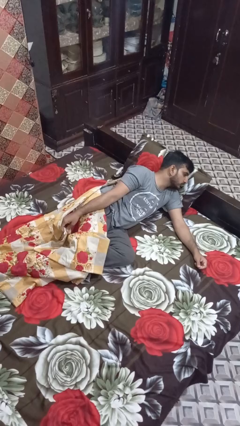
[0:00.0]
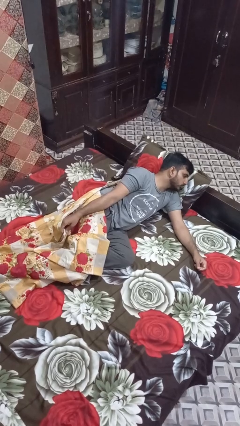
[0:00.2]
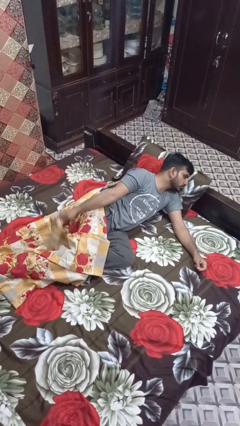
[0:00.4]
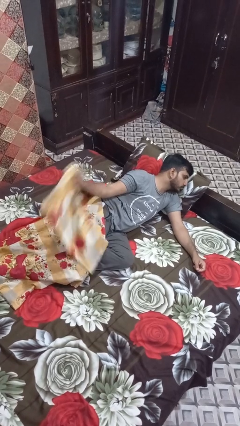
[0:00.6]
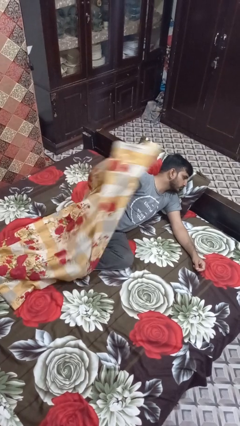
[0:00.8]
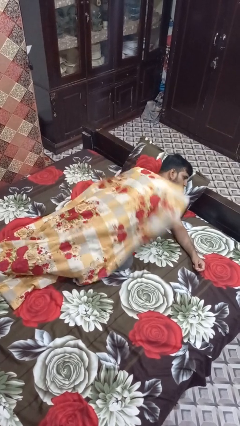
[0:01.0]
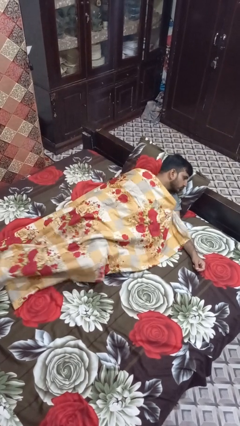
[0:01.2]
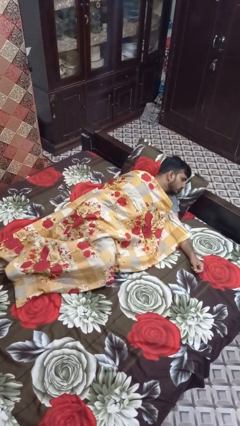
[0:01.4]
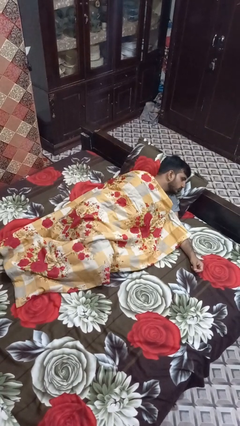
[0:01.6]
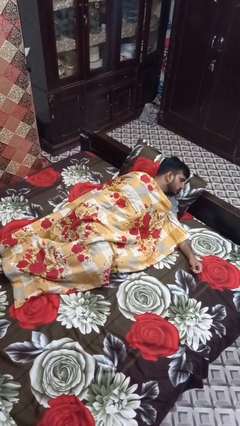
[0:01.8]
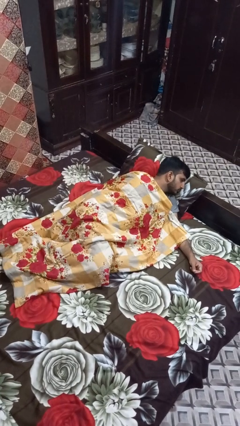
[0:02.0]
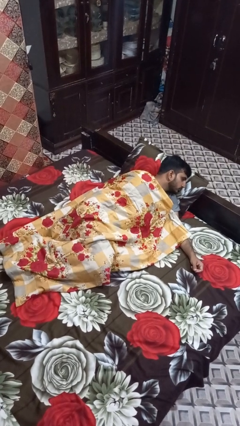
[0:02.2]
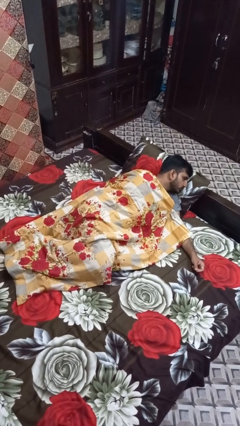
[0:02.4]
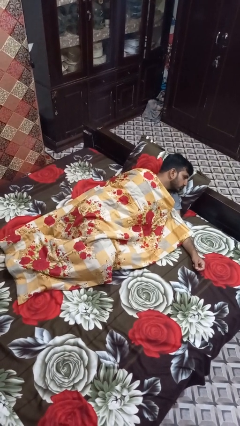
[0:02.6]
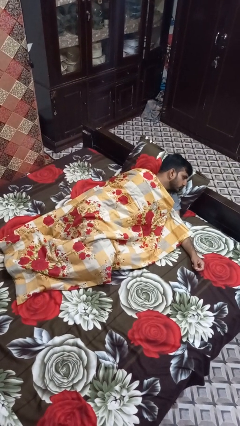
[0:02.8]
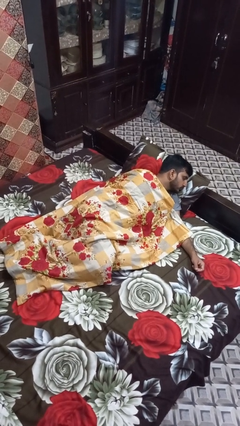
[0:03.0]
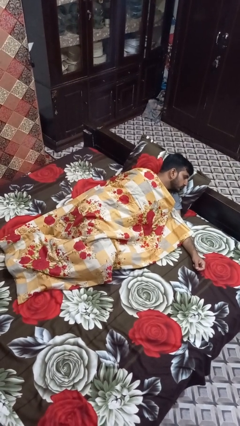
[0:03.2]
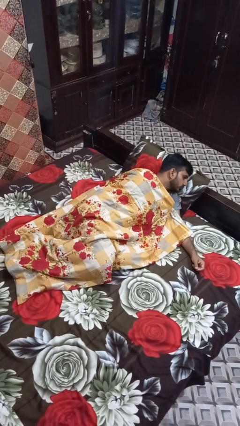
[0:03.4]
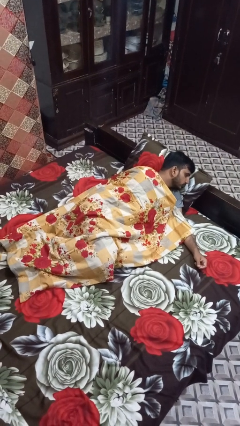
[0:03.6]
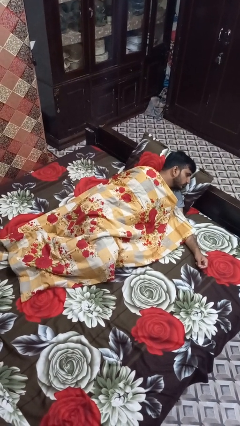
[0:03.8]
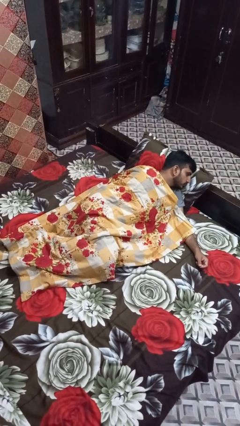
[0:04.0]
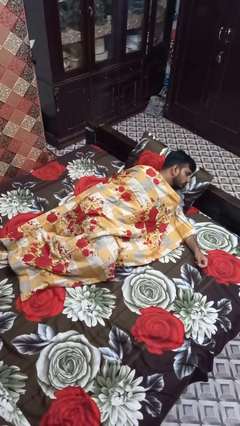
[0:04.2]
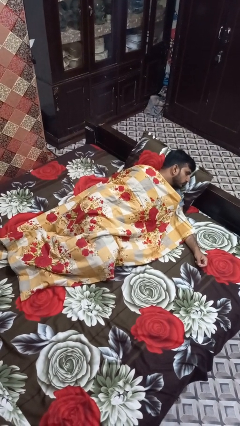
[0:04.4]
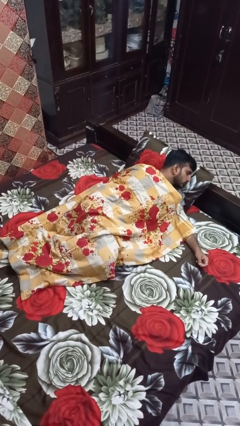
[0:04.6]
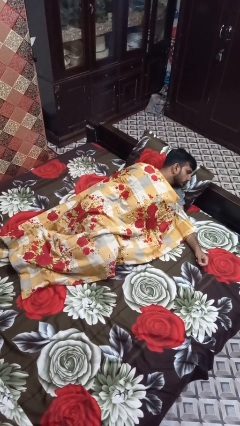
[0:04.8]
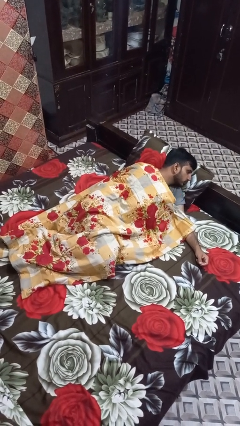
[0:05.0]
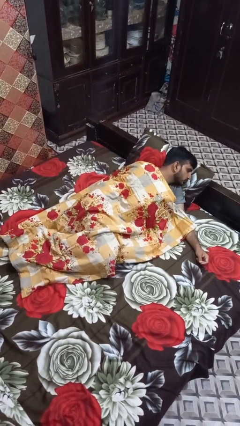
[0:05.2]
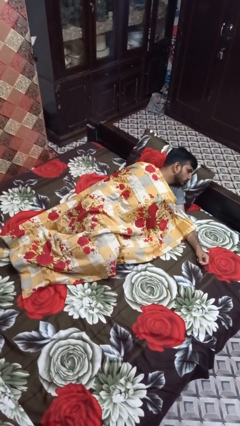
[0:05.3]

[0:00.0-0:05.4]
person covers with bedsheets

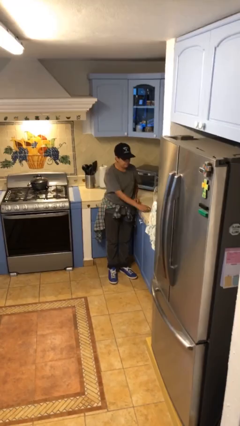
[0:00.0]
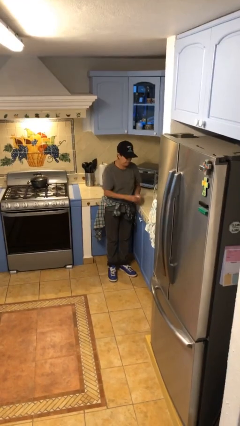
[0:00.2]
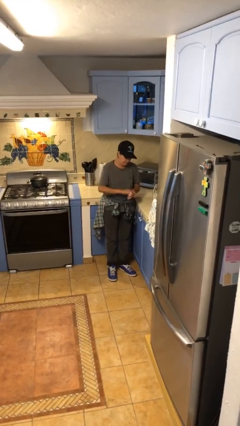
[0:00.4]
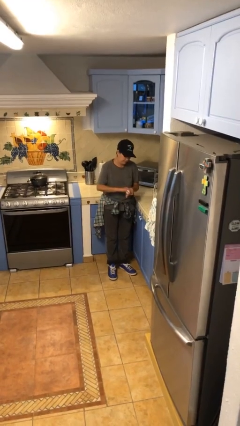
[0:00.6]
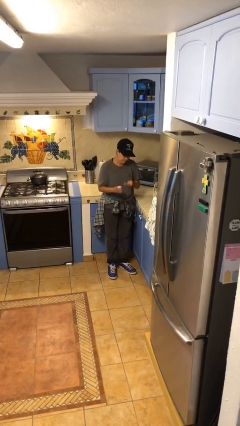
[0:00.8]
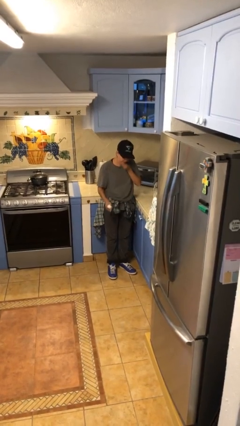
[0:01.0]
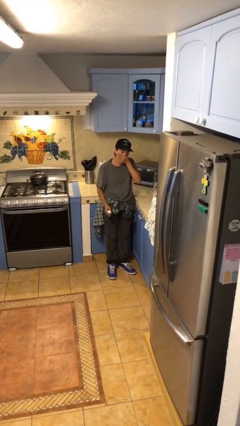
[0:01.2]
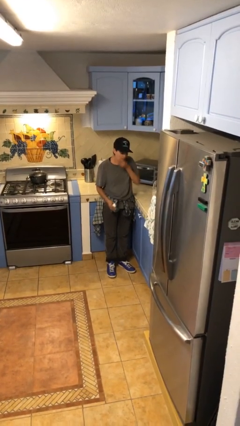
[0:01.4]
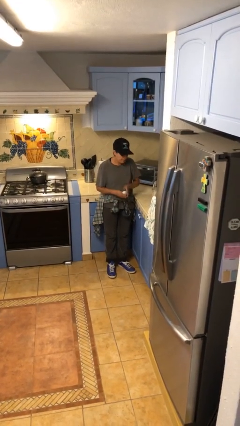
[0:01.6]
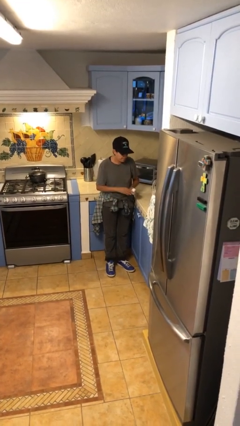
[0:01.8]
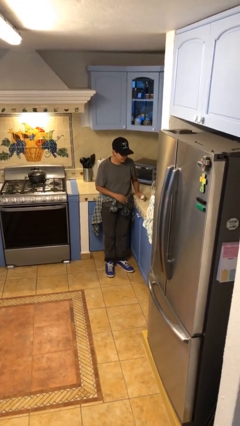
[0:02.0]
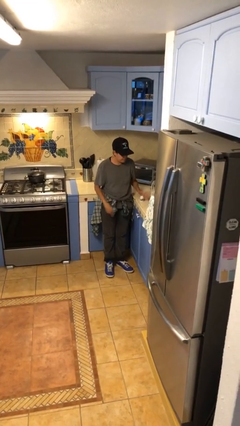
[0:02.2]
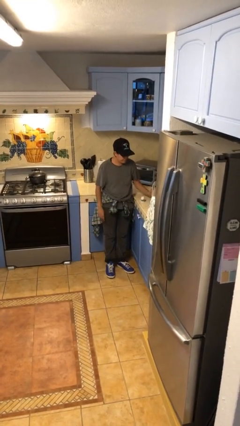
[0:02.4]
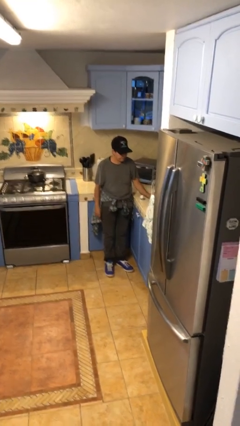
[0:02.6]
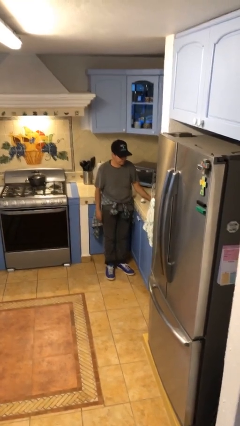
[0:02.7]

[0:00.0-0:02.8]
person takes medicine pills

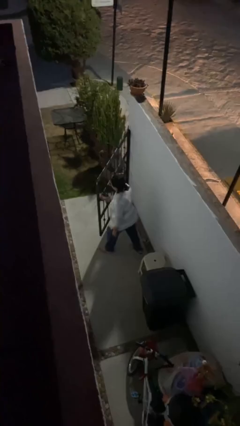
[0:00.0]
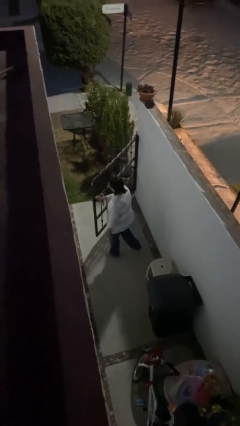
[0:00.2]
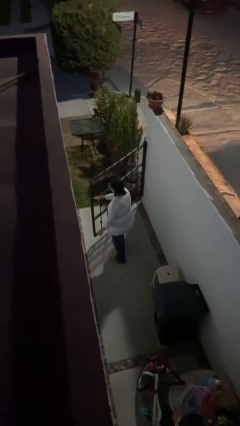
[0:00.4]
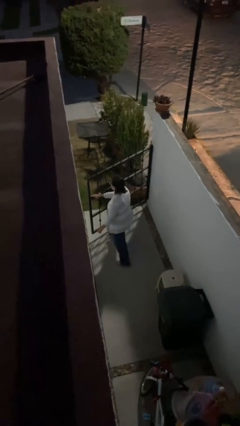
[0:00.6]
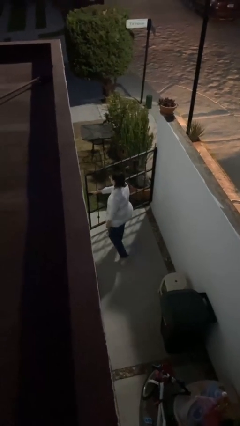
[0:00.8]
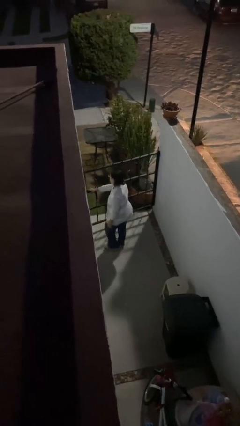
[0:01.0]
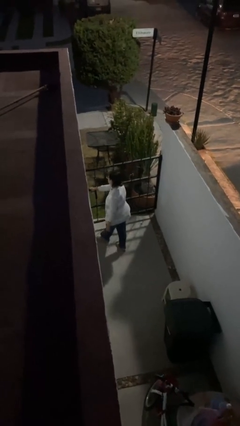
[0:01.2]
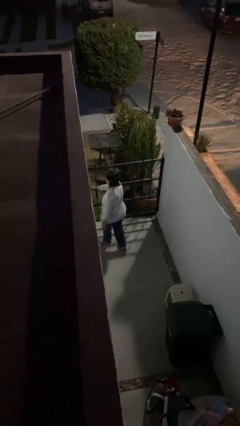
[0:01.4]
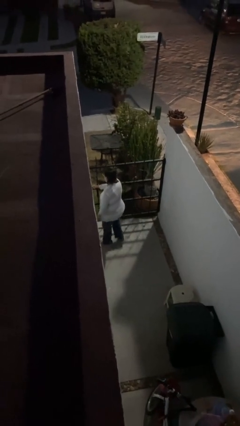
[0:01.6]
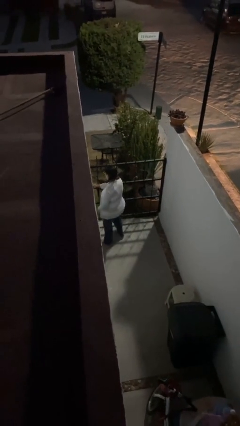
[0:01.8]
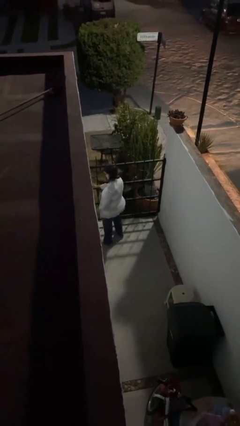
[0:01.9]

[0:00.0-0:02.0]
person closes facility door

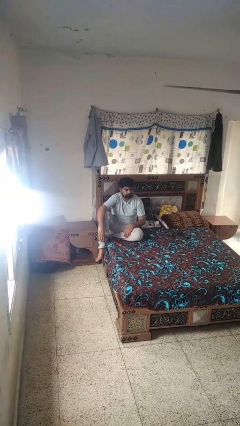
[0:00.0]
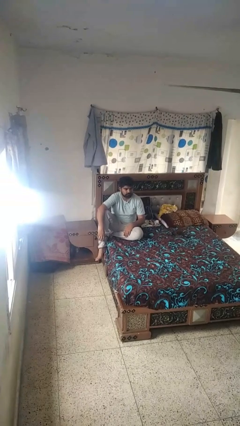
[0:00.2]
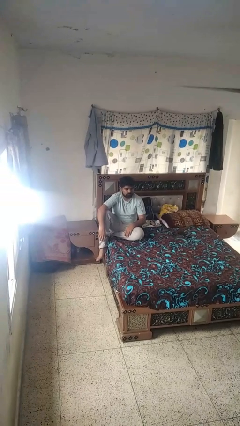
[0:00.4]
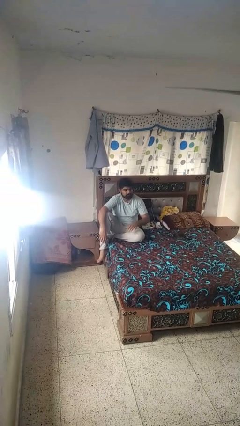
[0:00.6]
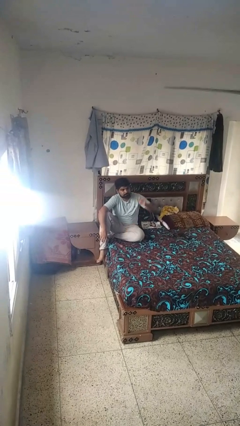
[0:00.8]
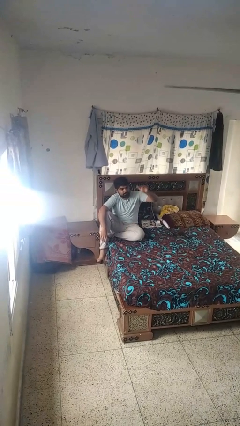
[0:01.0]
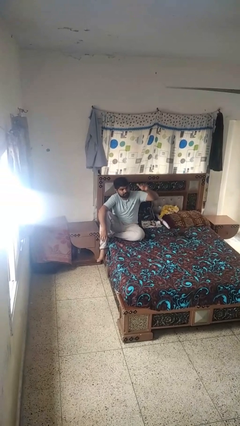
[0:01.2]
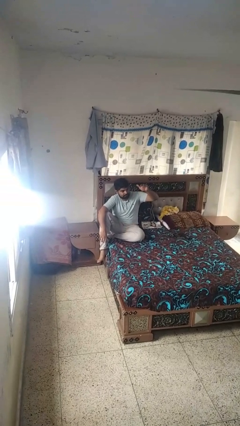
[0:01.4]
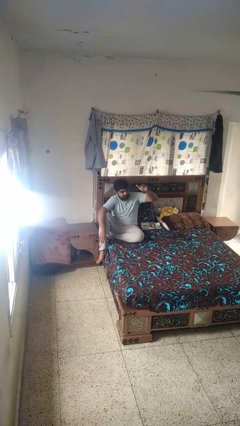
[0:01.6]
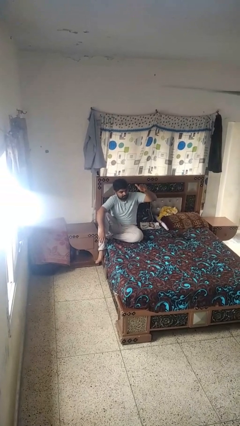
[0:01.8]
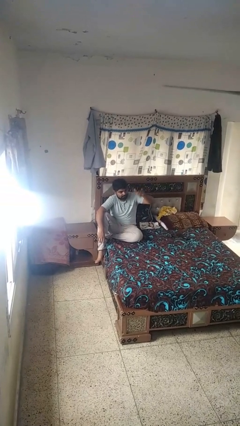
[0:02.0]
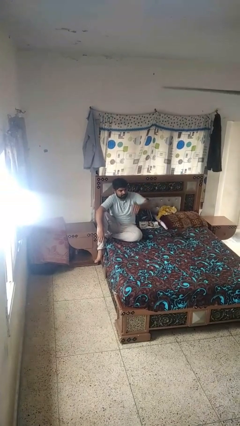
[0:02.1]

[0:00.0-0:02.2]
person gestures come here

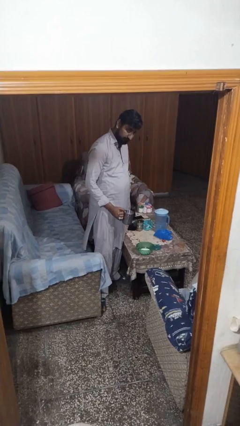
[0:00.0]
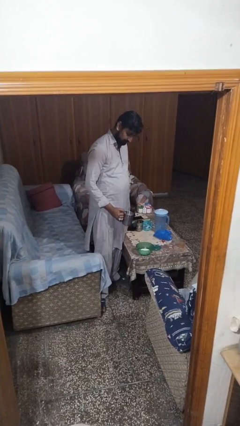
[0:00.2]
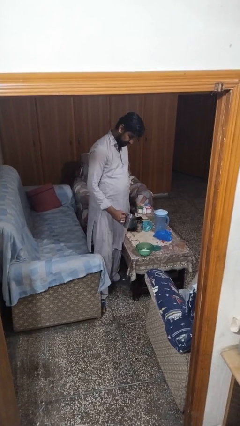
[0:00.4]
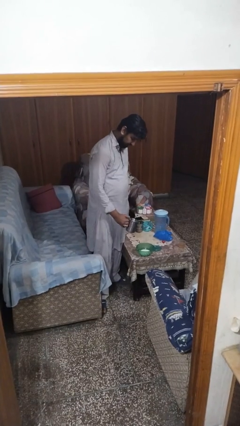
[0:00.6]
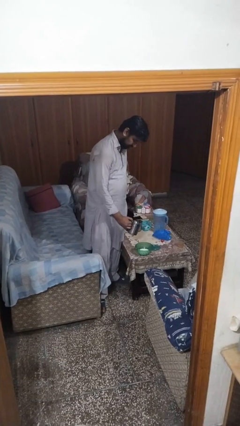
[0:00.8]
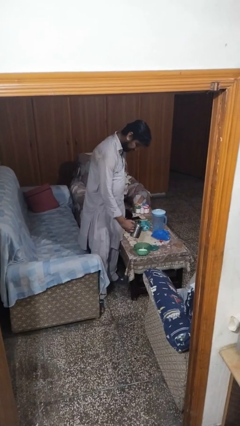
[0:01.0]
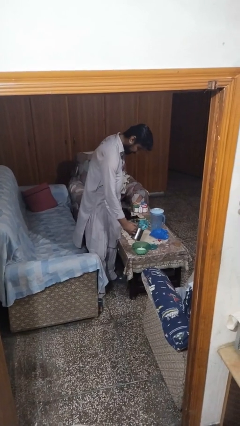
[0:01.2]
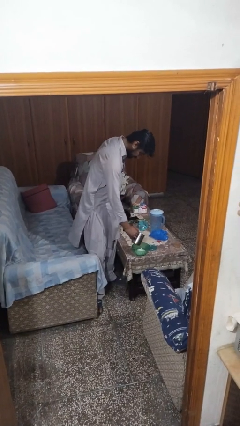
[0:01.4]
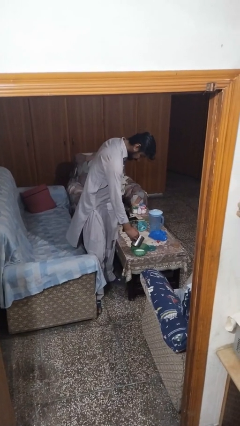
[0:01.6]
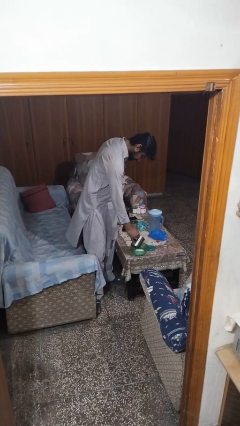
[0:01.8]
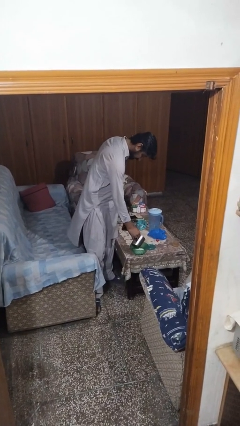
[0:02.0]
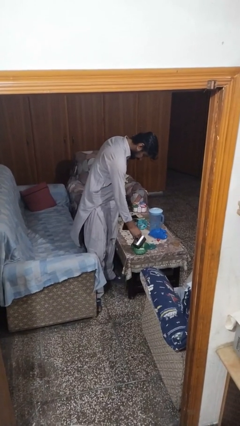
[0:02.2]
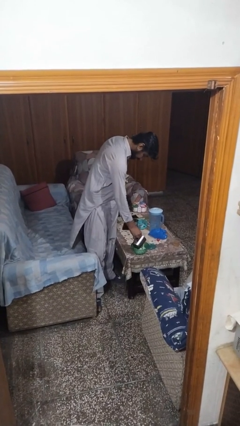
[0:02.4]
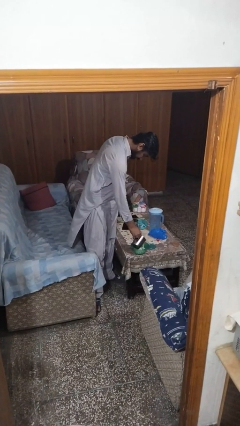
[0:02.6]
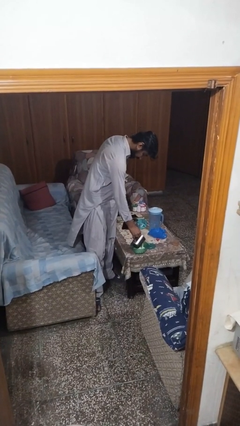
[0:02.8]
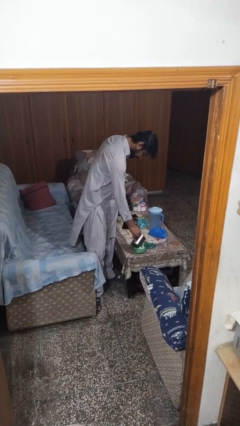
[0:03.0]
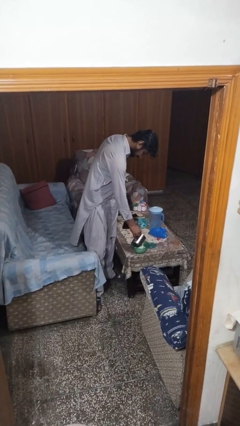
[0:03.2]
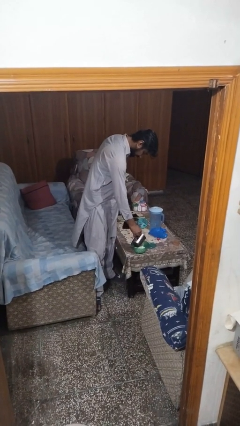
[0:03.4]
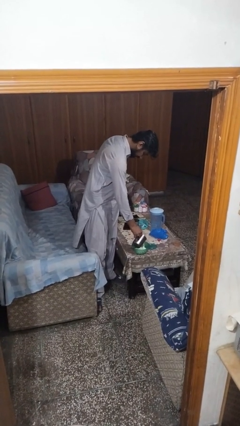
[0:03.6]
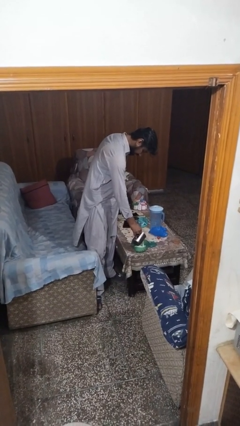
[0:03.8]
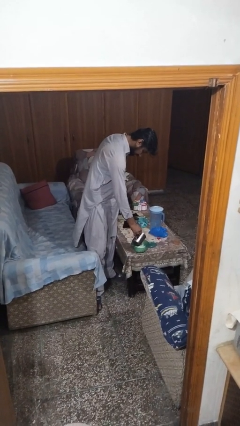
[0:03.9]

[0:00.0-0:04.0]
person pours into bowl

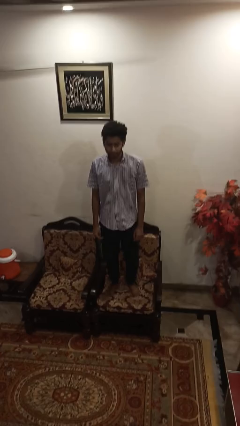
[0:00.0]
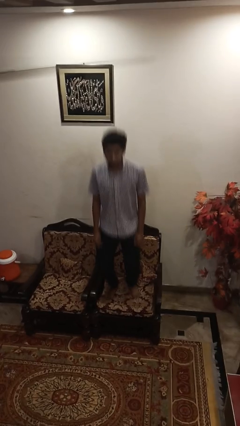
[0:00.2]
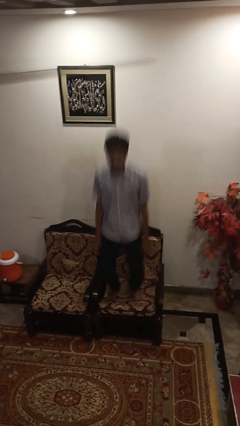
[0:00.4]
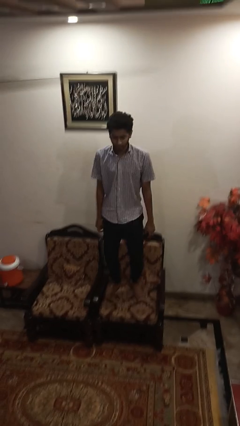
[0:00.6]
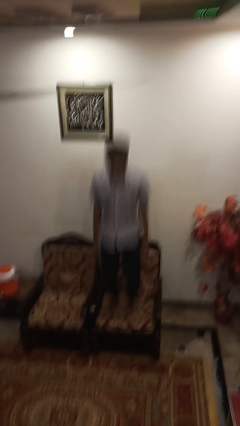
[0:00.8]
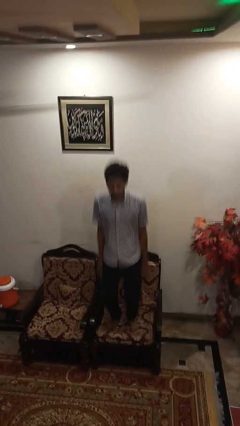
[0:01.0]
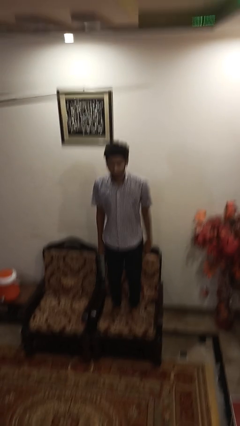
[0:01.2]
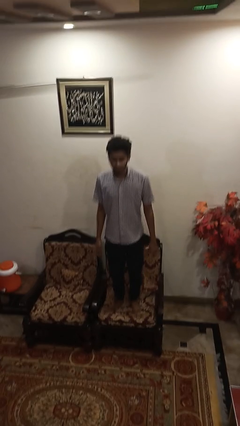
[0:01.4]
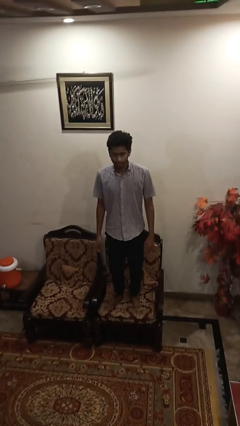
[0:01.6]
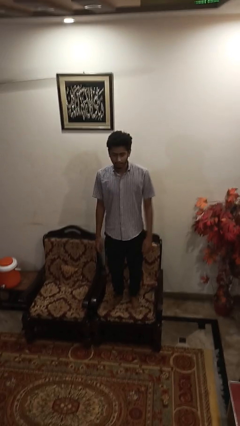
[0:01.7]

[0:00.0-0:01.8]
person jumps on couch
